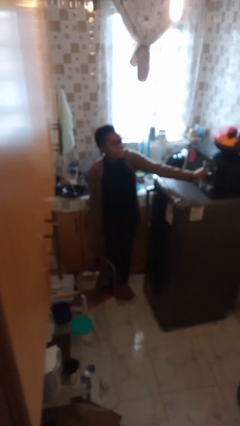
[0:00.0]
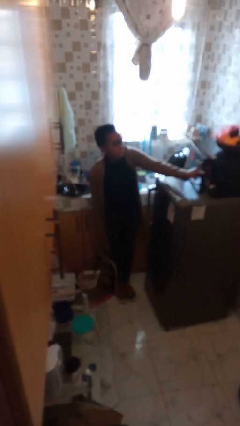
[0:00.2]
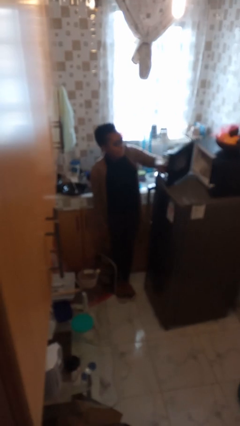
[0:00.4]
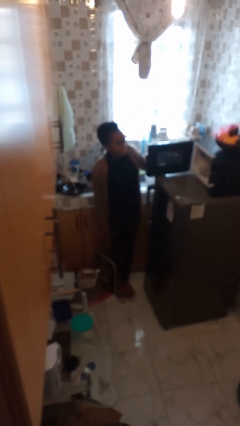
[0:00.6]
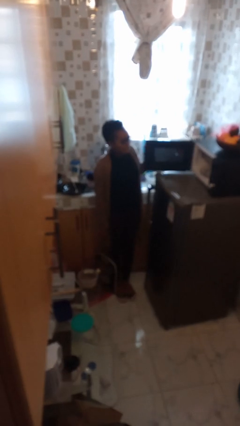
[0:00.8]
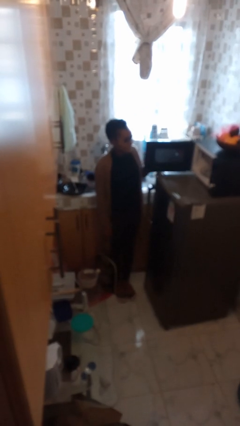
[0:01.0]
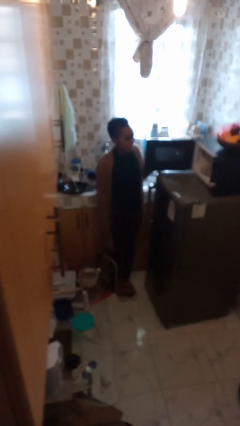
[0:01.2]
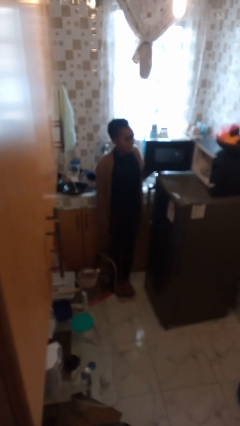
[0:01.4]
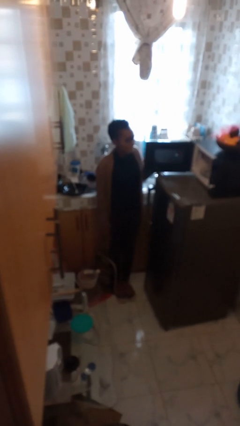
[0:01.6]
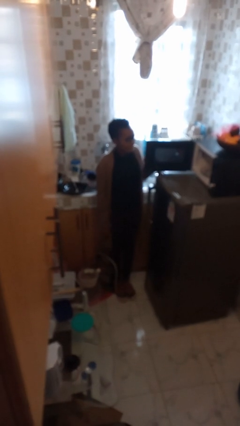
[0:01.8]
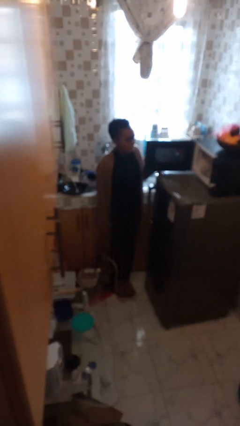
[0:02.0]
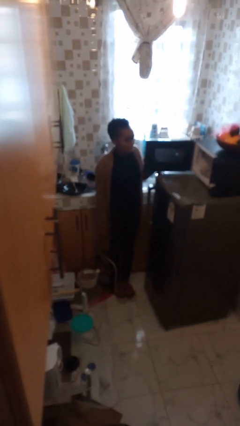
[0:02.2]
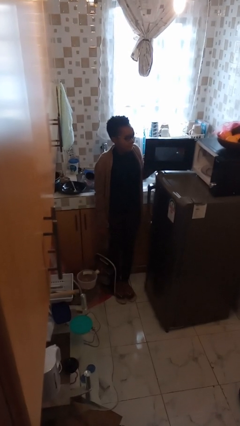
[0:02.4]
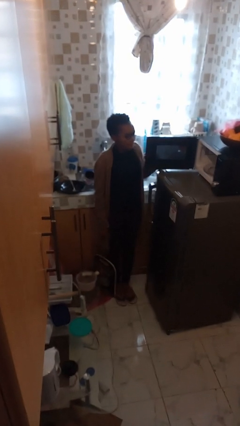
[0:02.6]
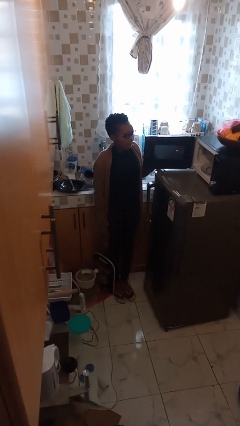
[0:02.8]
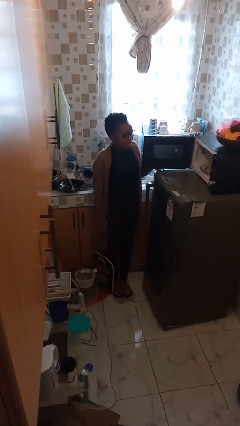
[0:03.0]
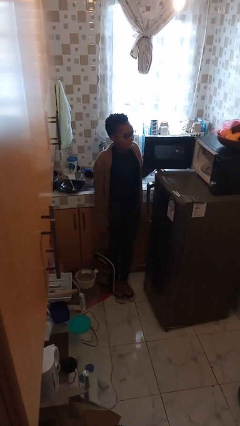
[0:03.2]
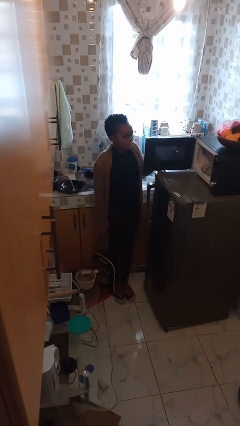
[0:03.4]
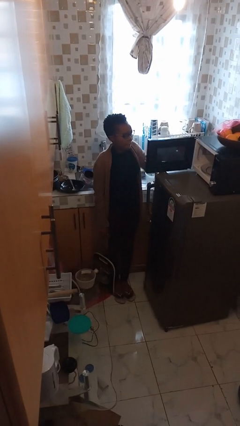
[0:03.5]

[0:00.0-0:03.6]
person opens microwave

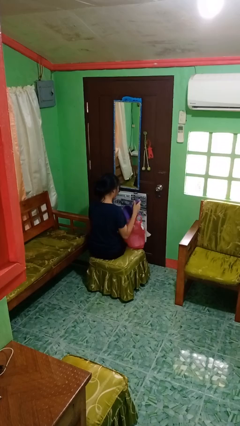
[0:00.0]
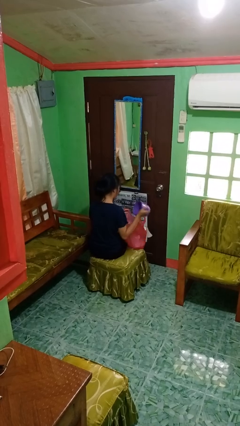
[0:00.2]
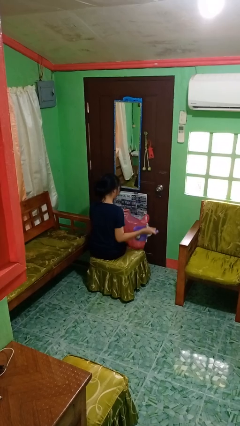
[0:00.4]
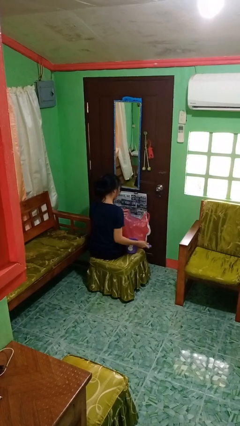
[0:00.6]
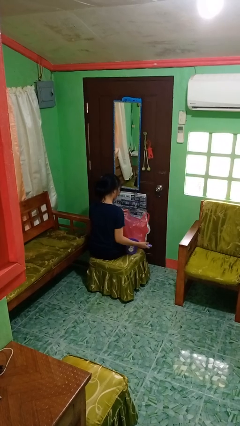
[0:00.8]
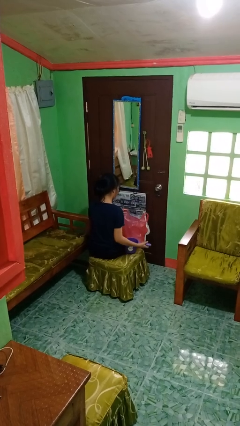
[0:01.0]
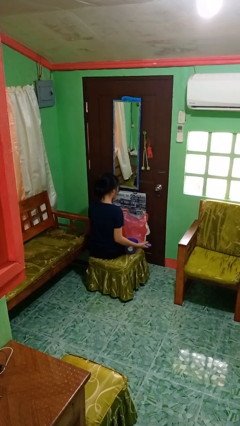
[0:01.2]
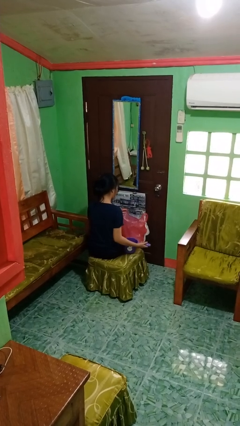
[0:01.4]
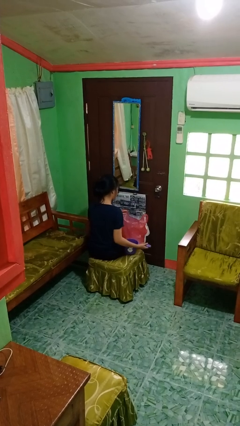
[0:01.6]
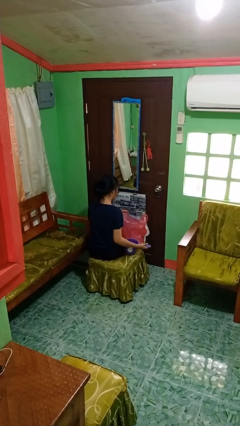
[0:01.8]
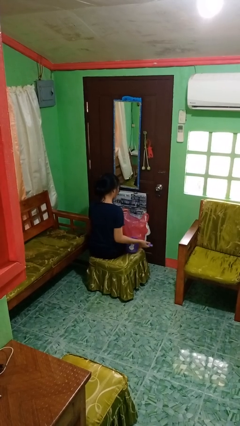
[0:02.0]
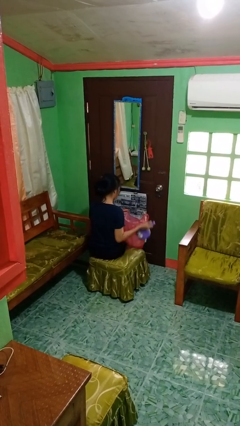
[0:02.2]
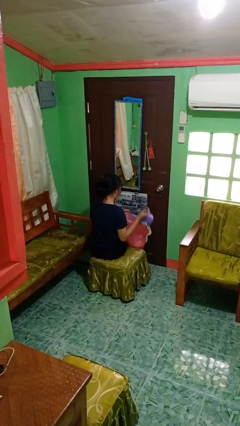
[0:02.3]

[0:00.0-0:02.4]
person takes object from bag

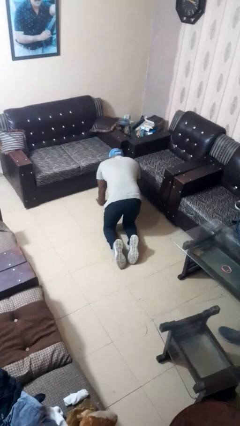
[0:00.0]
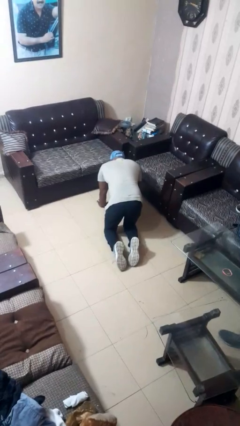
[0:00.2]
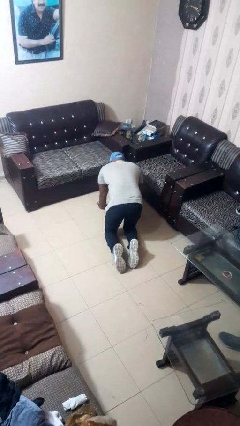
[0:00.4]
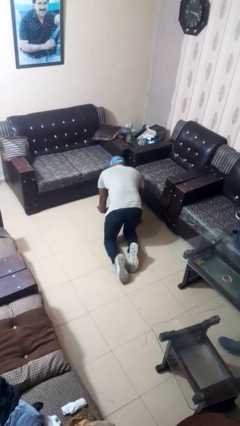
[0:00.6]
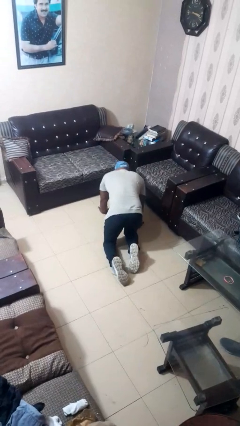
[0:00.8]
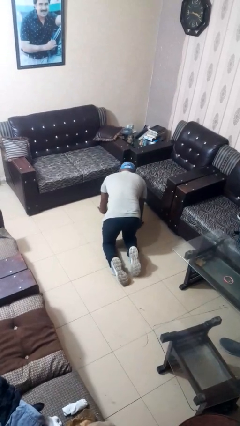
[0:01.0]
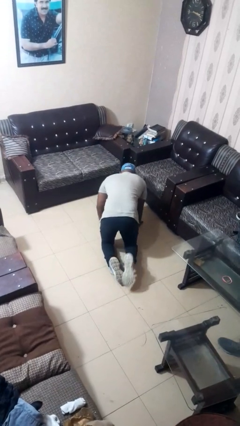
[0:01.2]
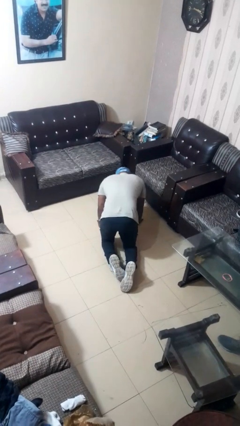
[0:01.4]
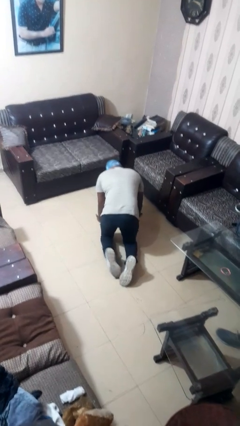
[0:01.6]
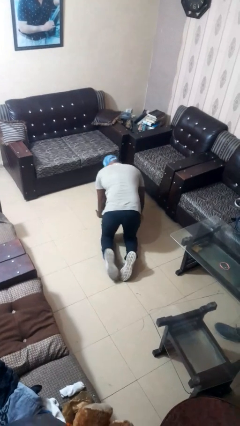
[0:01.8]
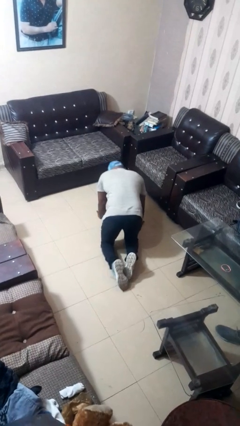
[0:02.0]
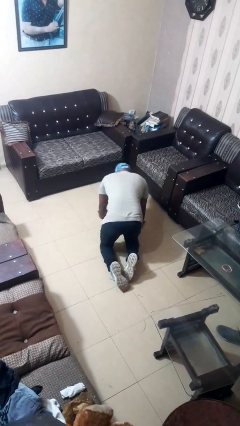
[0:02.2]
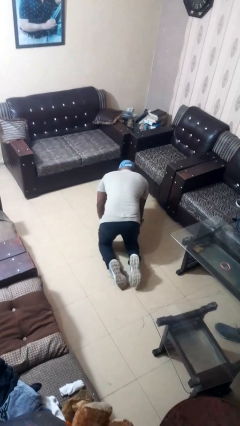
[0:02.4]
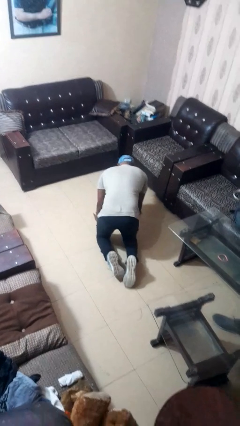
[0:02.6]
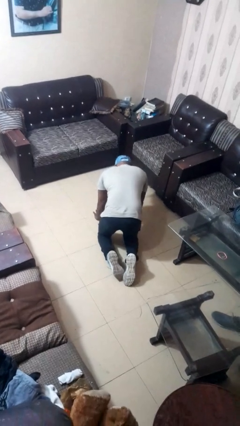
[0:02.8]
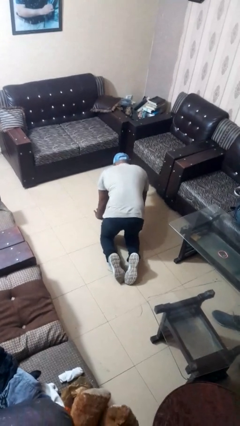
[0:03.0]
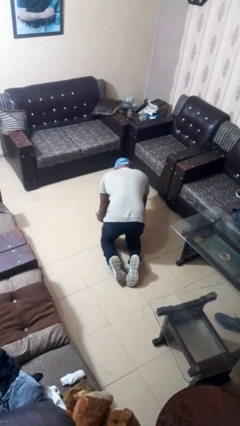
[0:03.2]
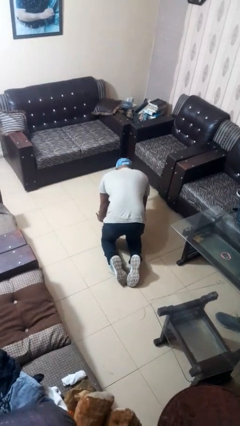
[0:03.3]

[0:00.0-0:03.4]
person crawls

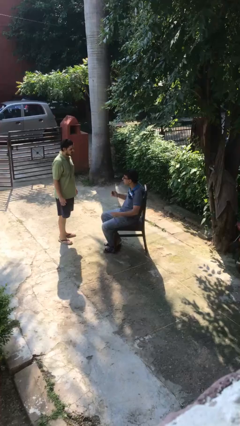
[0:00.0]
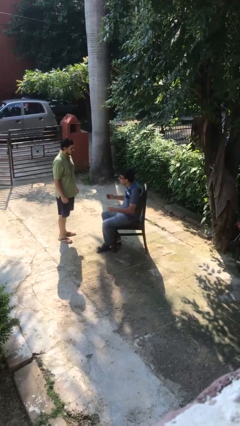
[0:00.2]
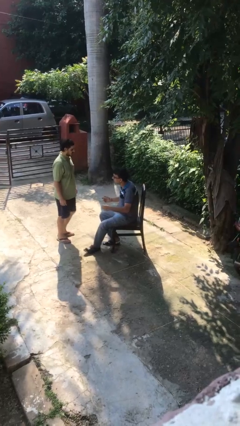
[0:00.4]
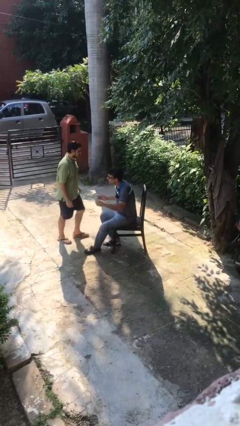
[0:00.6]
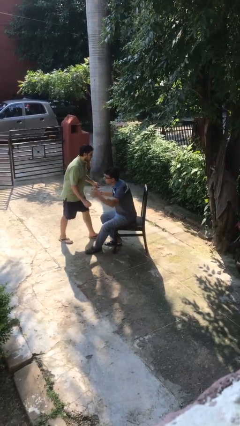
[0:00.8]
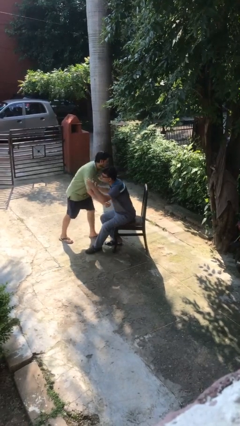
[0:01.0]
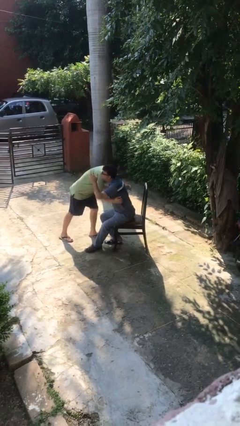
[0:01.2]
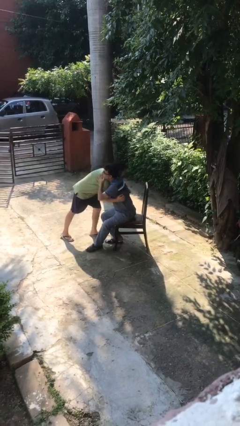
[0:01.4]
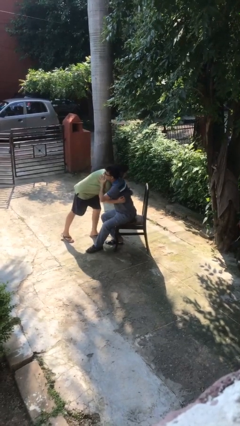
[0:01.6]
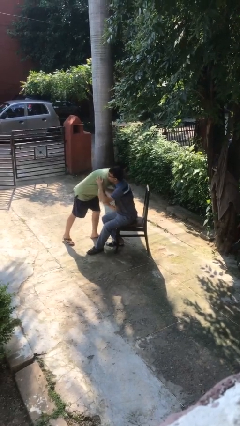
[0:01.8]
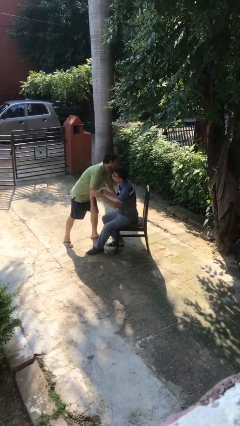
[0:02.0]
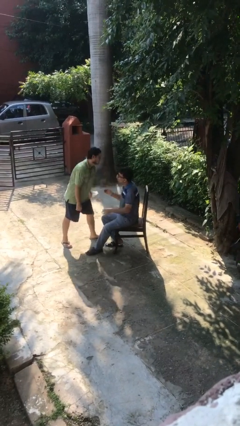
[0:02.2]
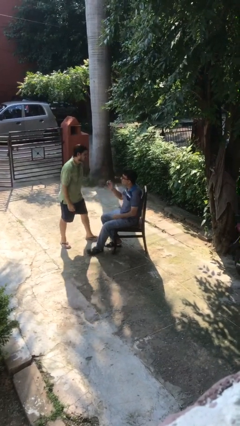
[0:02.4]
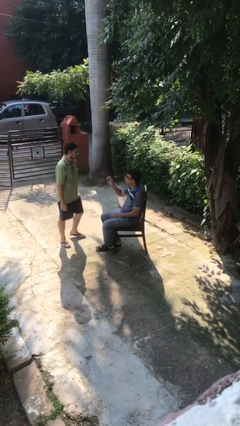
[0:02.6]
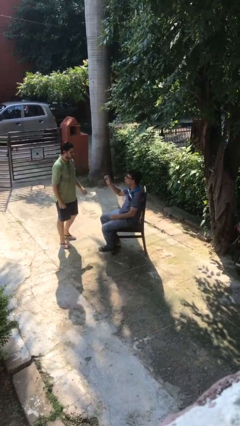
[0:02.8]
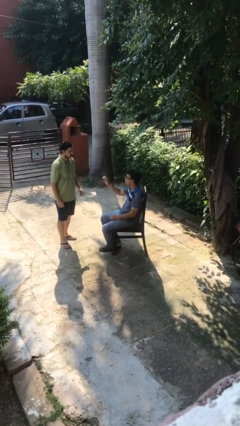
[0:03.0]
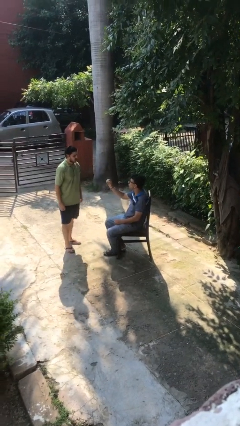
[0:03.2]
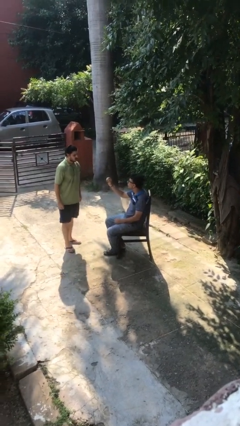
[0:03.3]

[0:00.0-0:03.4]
person embraces person

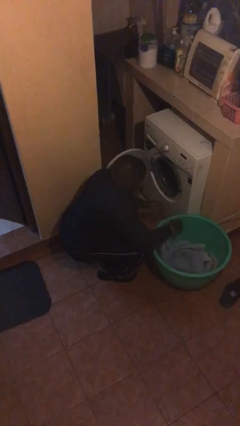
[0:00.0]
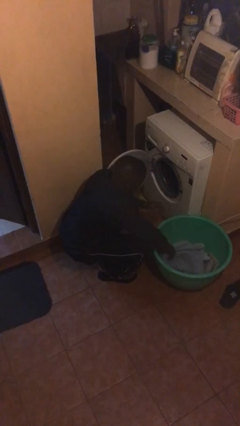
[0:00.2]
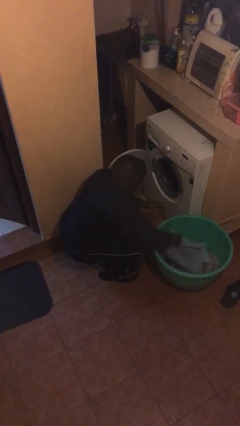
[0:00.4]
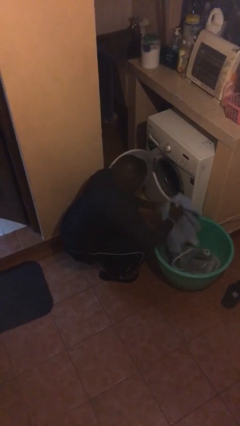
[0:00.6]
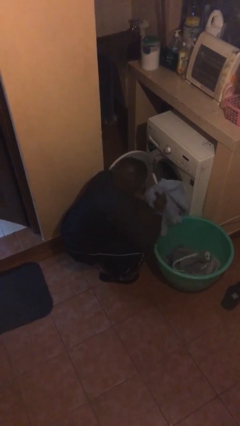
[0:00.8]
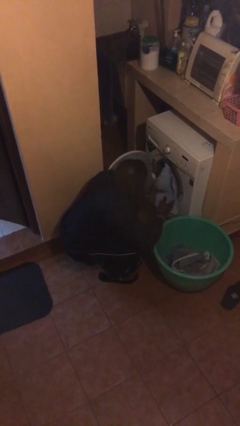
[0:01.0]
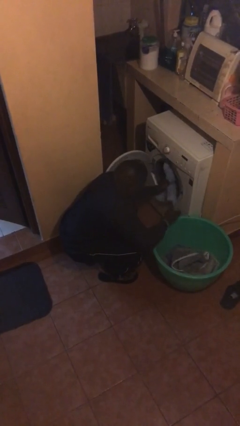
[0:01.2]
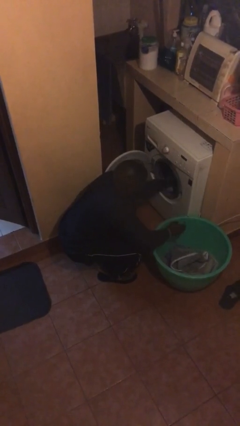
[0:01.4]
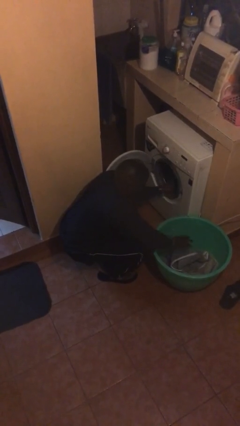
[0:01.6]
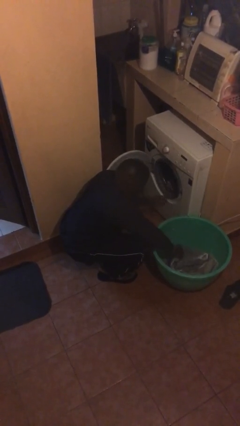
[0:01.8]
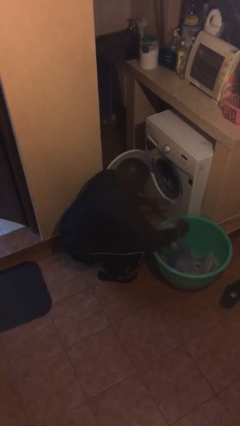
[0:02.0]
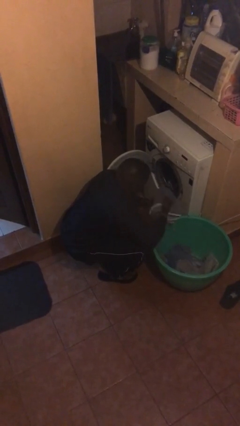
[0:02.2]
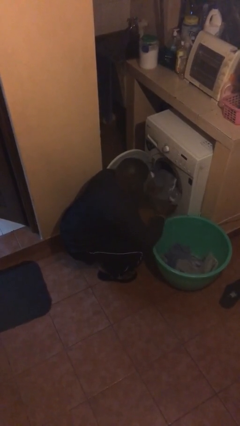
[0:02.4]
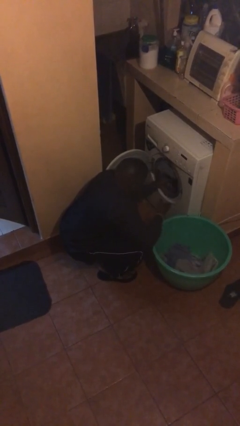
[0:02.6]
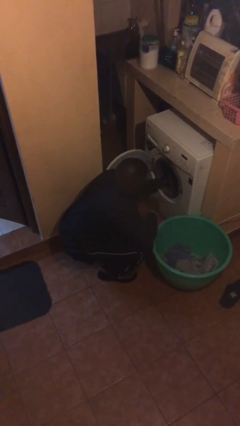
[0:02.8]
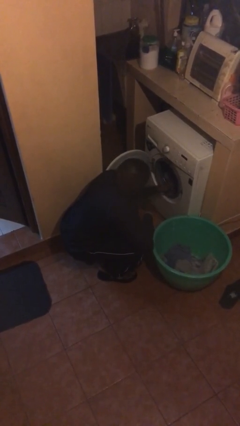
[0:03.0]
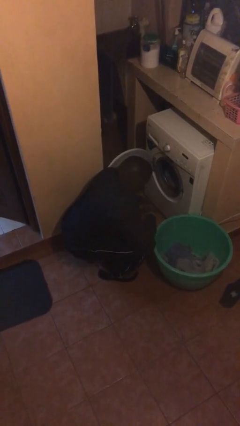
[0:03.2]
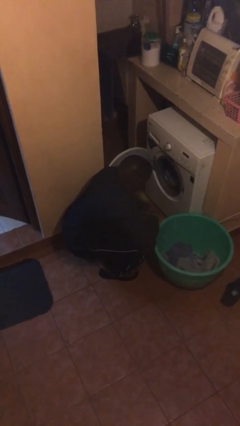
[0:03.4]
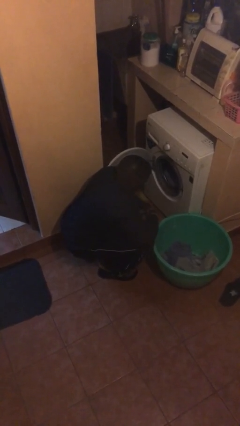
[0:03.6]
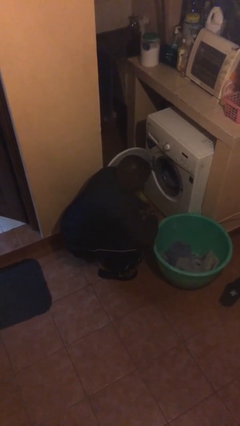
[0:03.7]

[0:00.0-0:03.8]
person loads clotheswasher

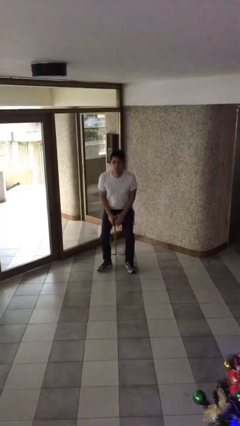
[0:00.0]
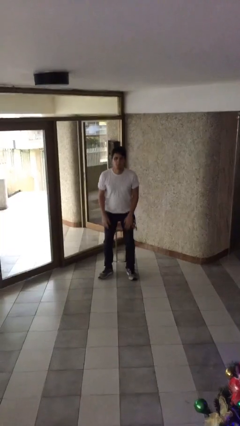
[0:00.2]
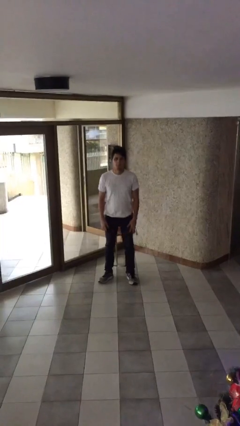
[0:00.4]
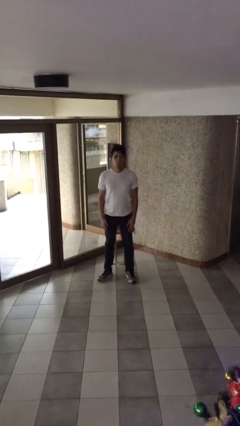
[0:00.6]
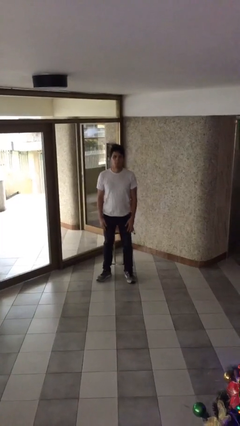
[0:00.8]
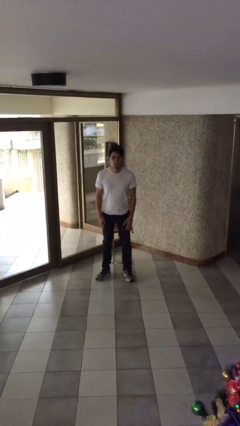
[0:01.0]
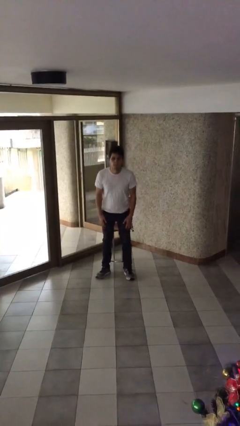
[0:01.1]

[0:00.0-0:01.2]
person stands up
